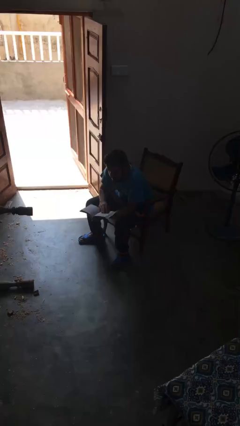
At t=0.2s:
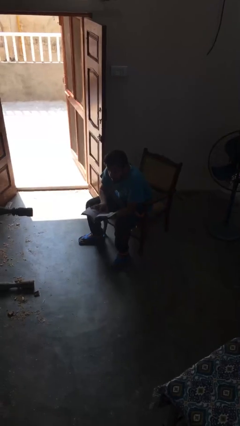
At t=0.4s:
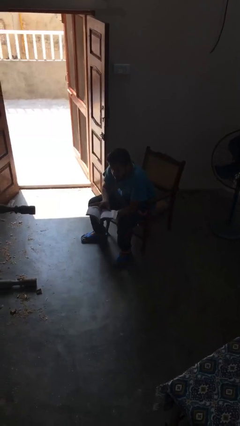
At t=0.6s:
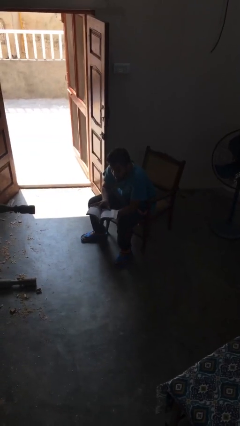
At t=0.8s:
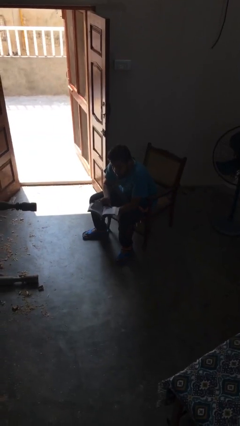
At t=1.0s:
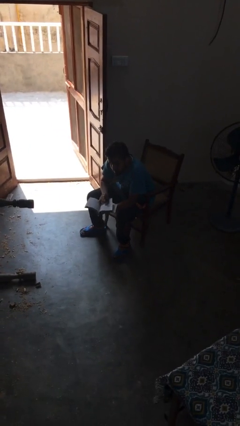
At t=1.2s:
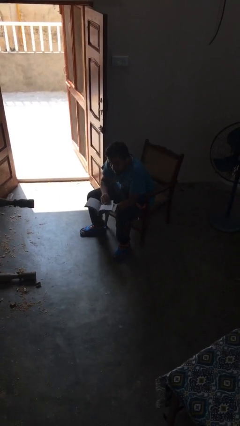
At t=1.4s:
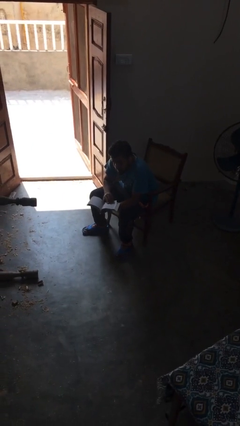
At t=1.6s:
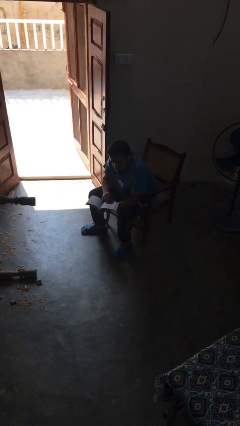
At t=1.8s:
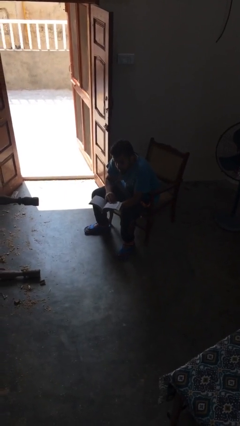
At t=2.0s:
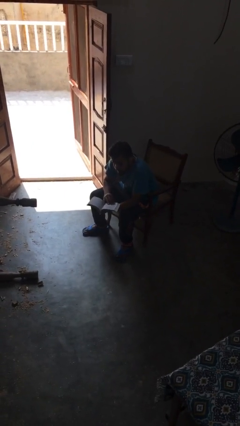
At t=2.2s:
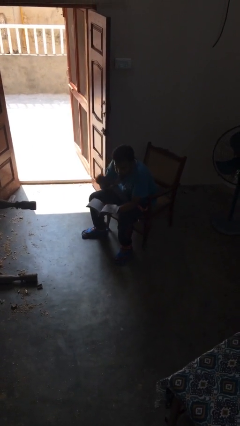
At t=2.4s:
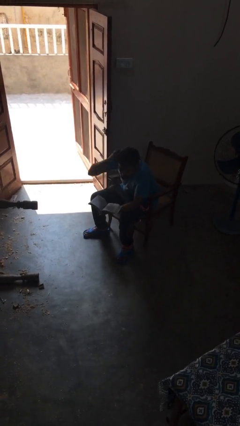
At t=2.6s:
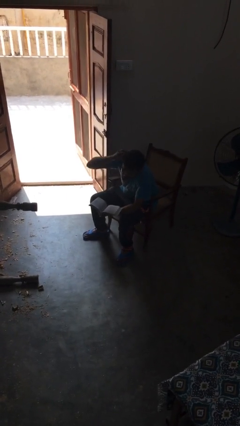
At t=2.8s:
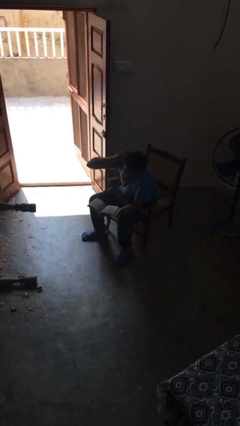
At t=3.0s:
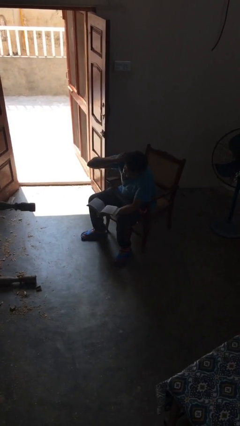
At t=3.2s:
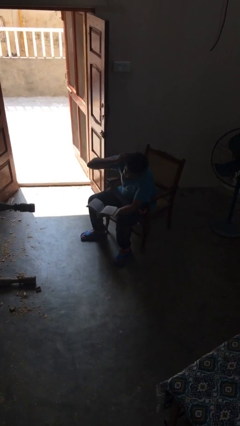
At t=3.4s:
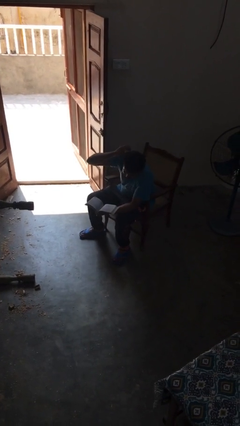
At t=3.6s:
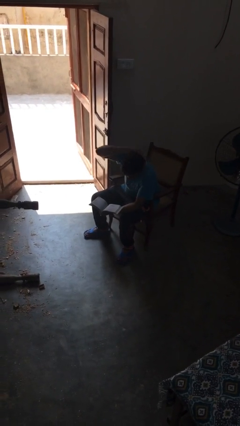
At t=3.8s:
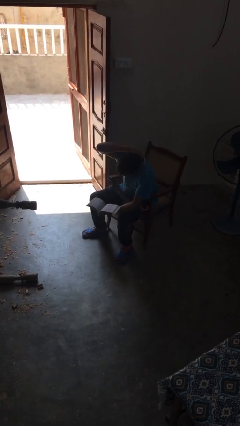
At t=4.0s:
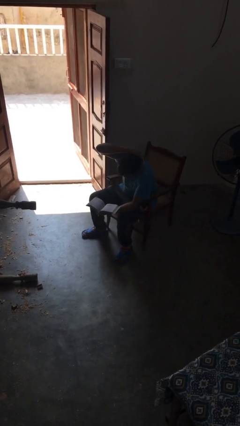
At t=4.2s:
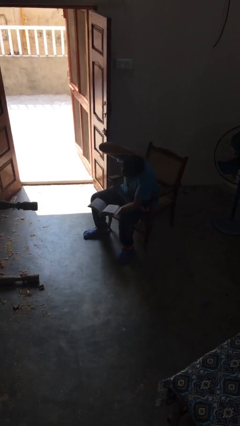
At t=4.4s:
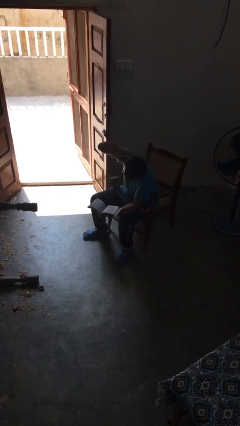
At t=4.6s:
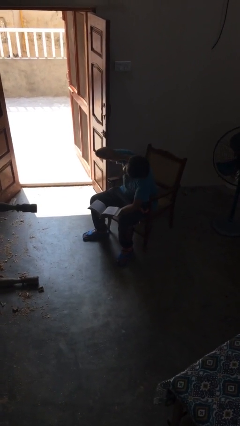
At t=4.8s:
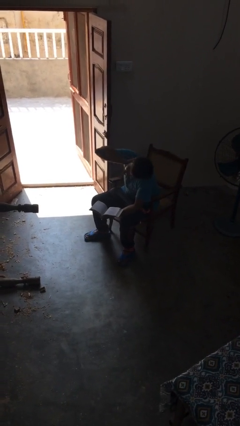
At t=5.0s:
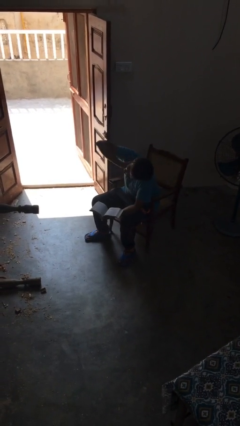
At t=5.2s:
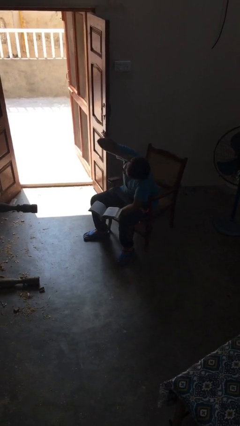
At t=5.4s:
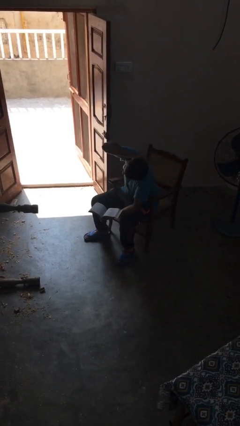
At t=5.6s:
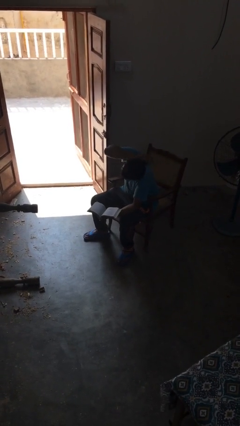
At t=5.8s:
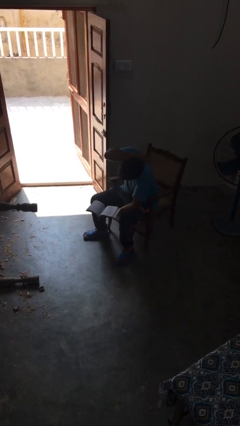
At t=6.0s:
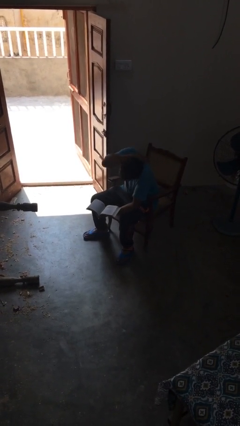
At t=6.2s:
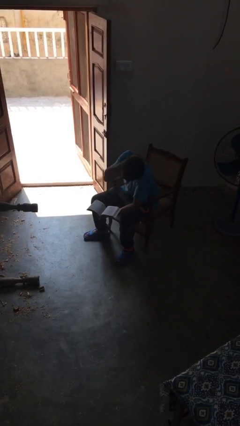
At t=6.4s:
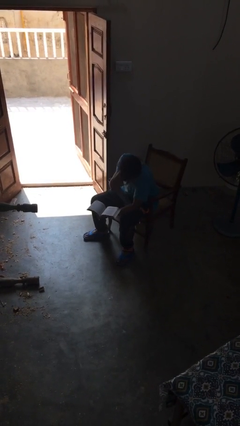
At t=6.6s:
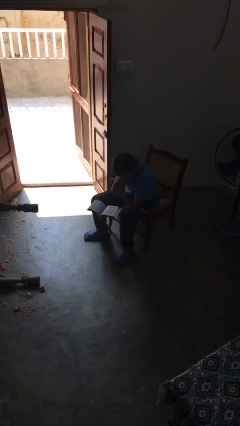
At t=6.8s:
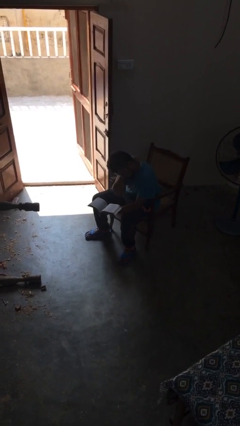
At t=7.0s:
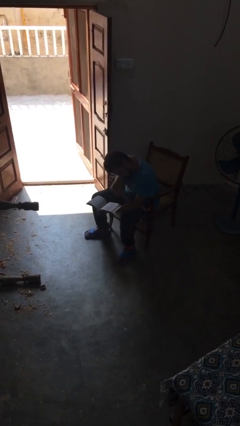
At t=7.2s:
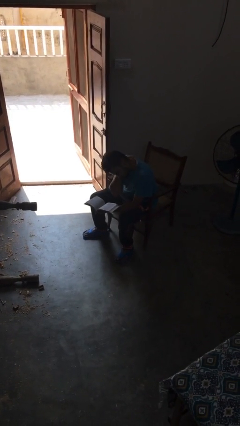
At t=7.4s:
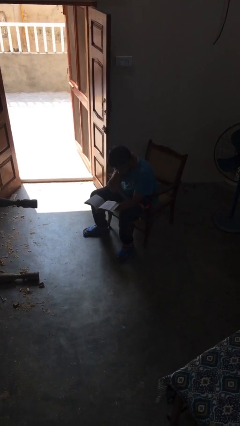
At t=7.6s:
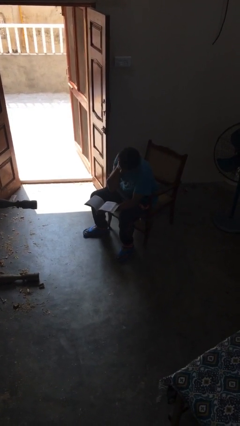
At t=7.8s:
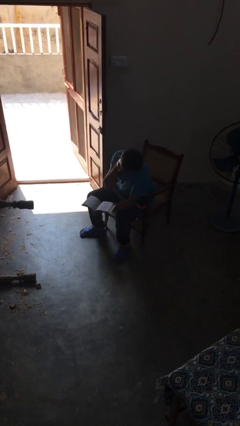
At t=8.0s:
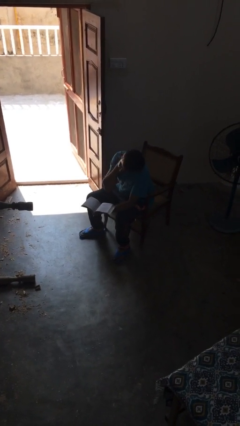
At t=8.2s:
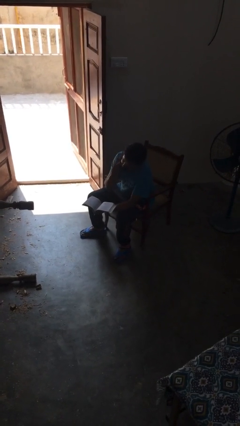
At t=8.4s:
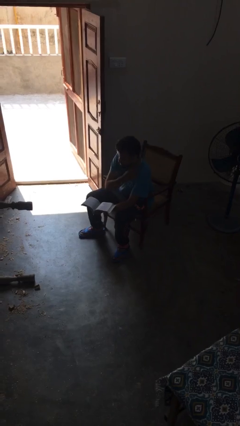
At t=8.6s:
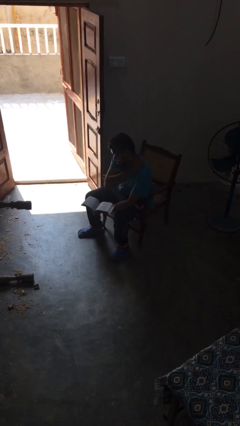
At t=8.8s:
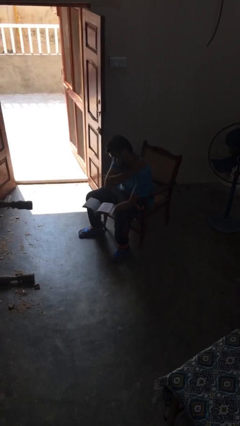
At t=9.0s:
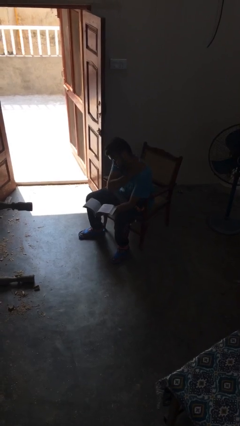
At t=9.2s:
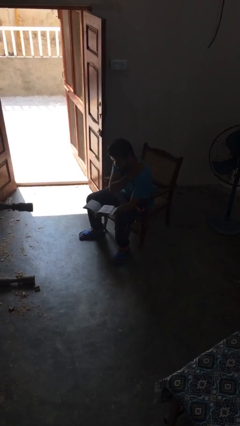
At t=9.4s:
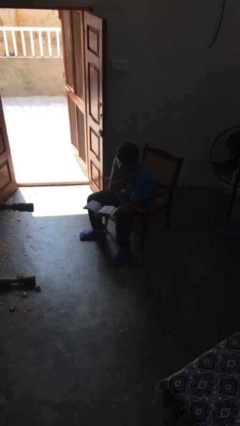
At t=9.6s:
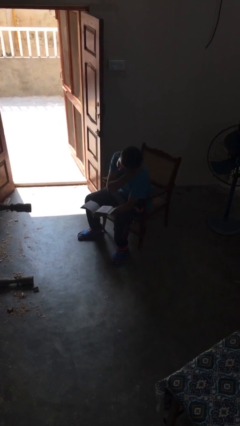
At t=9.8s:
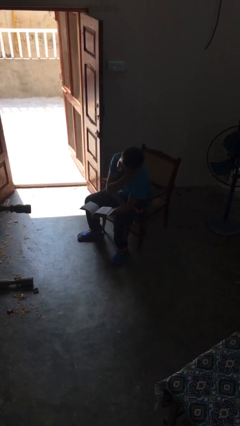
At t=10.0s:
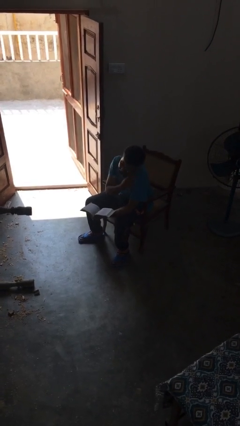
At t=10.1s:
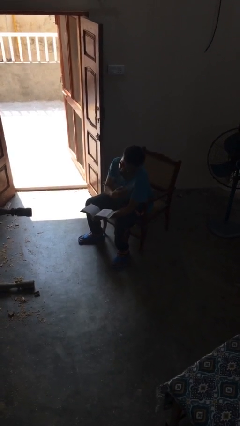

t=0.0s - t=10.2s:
person reads document

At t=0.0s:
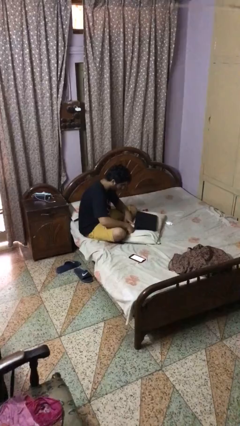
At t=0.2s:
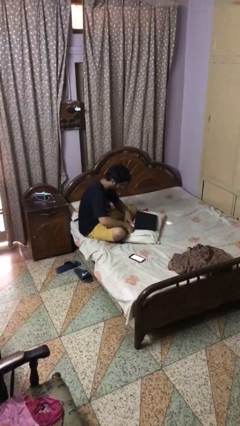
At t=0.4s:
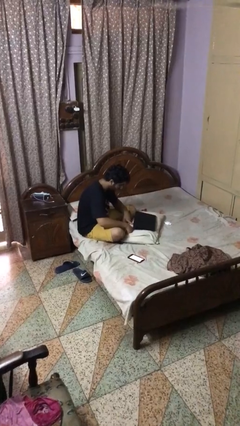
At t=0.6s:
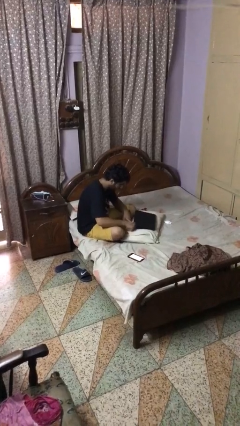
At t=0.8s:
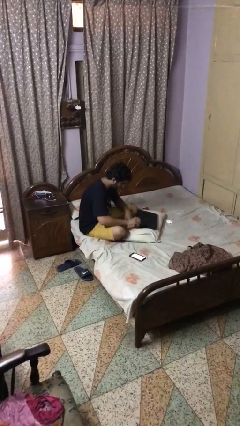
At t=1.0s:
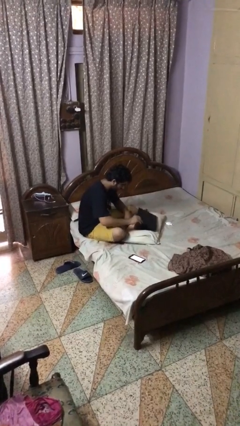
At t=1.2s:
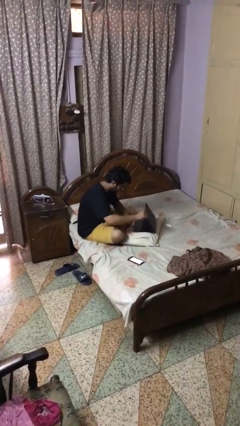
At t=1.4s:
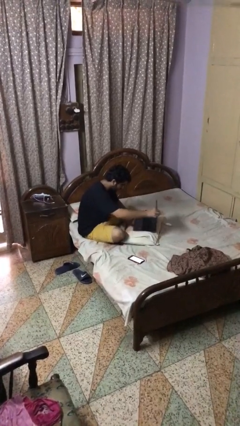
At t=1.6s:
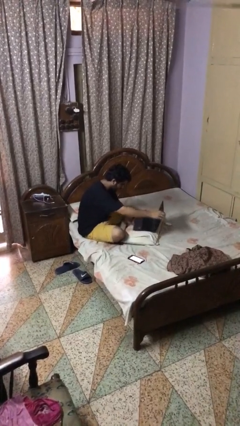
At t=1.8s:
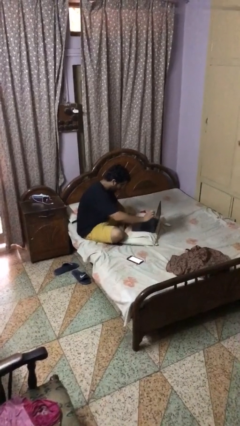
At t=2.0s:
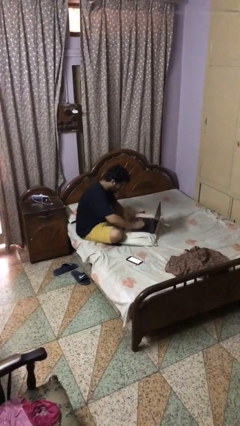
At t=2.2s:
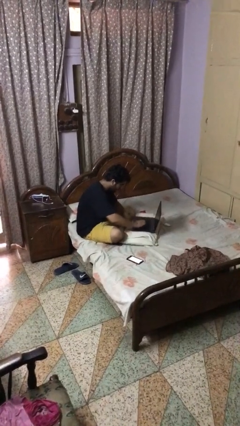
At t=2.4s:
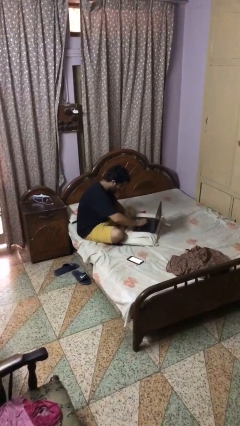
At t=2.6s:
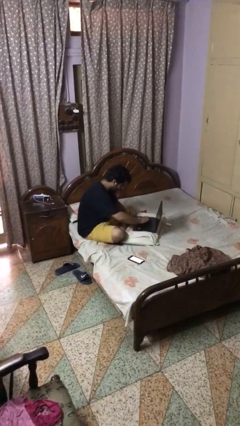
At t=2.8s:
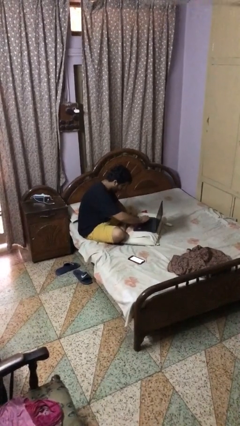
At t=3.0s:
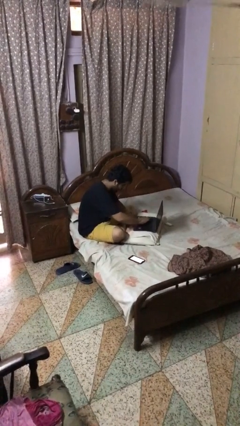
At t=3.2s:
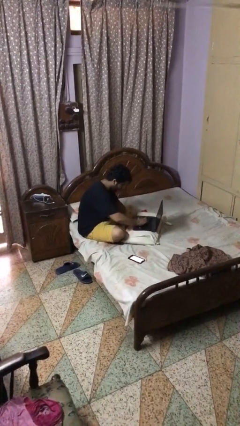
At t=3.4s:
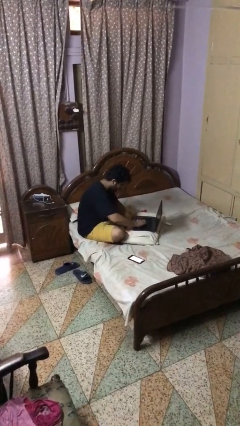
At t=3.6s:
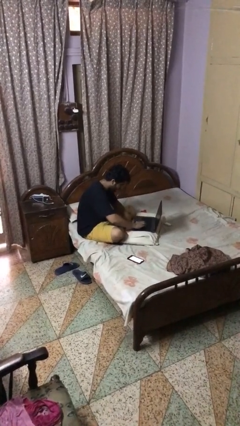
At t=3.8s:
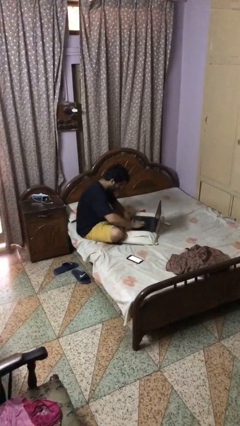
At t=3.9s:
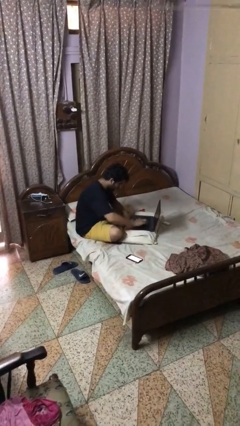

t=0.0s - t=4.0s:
person opens laptop

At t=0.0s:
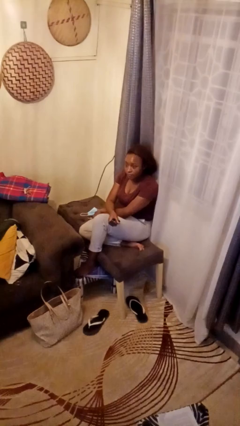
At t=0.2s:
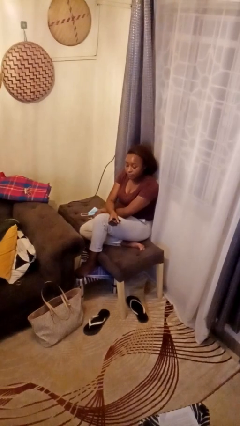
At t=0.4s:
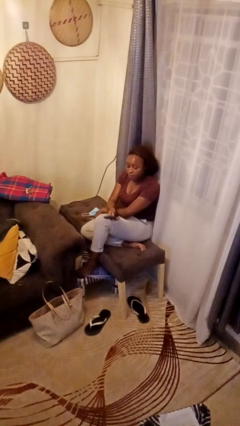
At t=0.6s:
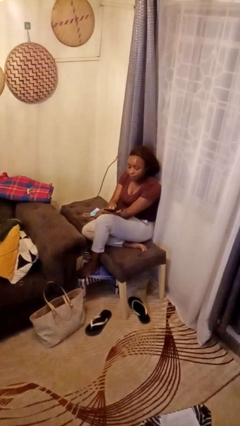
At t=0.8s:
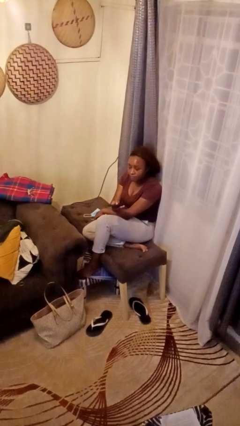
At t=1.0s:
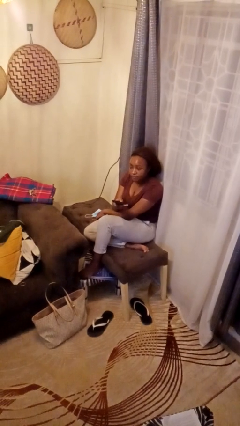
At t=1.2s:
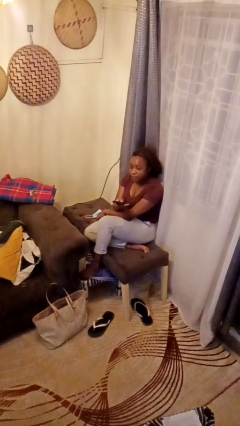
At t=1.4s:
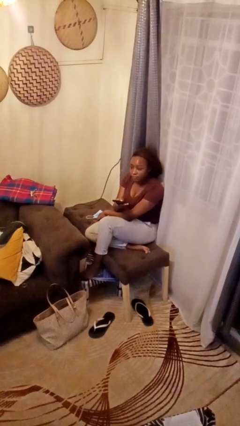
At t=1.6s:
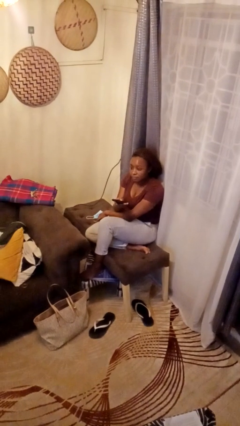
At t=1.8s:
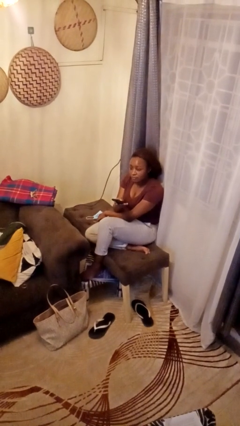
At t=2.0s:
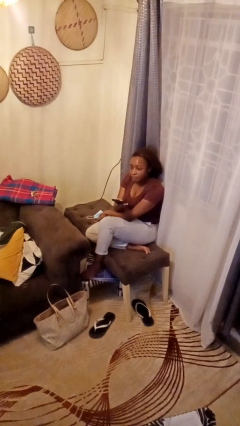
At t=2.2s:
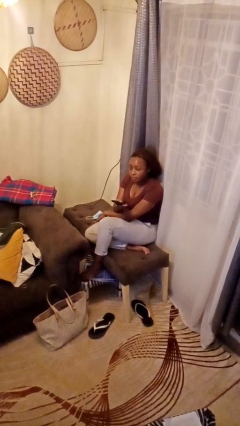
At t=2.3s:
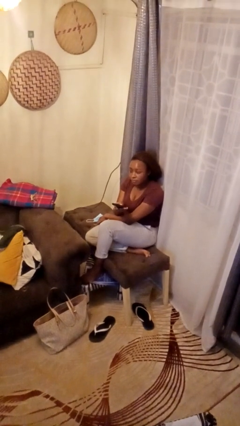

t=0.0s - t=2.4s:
person uses television remote

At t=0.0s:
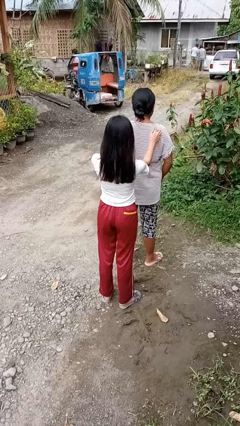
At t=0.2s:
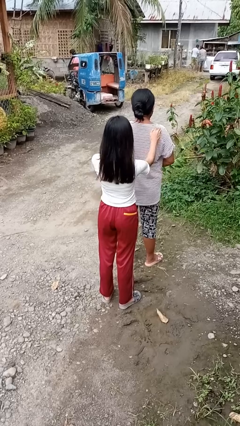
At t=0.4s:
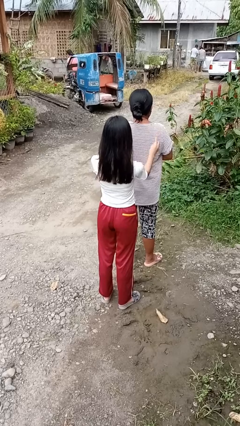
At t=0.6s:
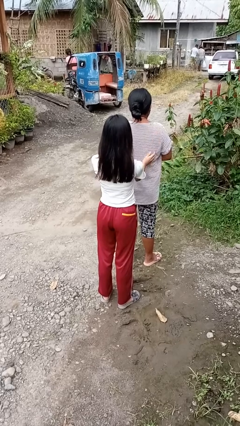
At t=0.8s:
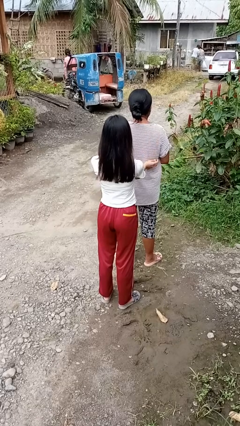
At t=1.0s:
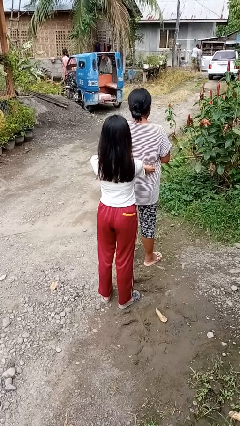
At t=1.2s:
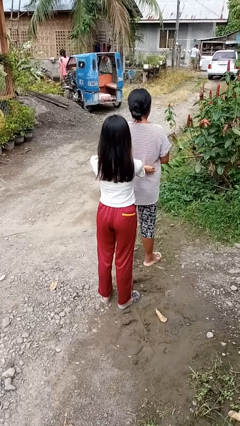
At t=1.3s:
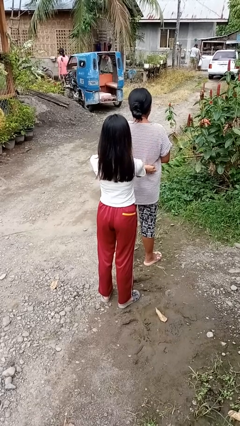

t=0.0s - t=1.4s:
person tickles person
